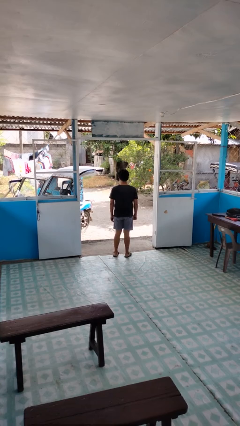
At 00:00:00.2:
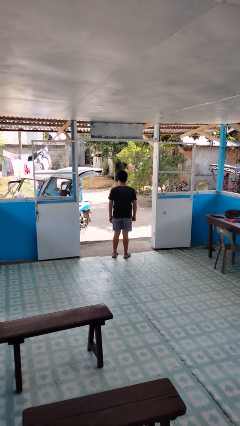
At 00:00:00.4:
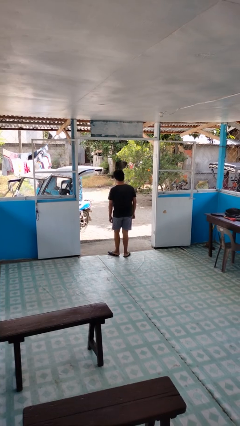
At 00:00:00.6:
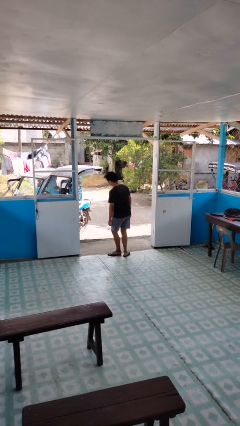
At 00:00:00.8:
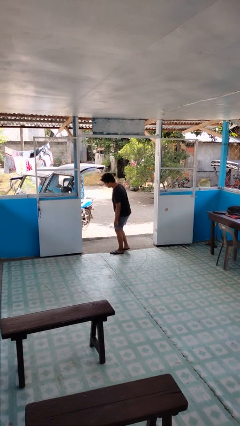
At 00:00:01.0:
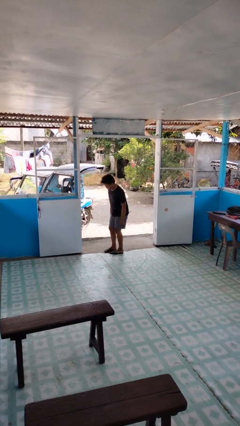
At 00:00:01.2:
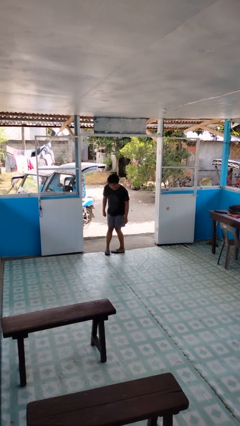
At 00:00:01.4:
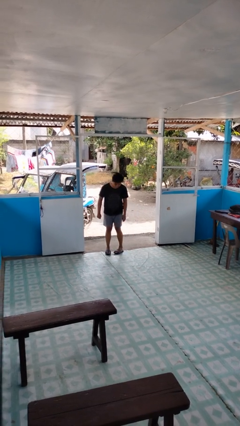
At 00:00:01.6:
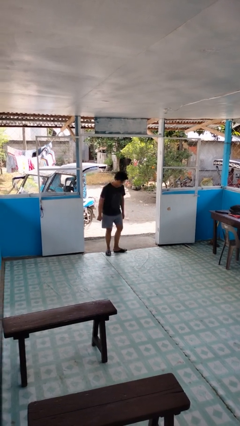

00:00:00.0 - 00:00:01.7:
person twirls

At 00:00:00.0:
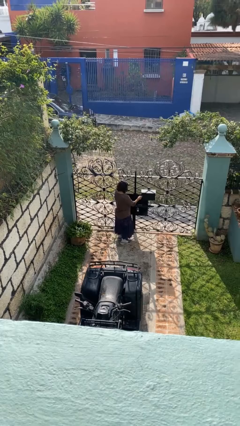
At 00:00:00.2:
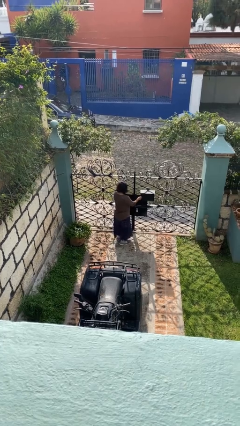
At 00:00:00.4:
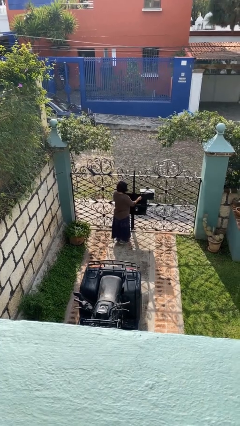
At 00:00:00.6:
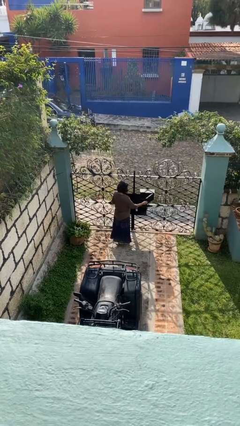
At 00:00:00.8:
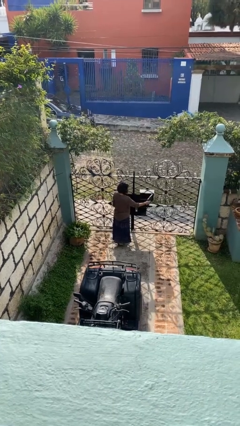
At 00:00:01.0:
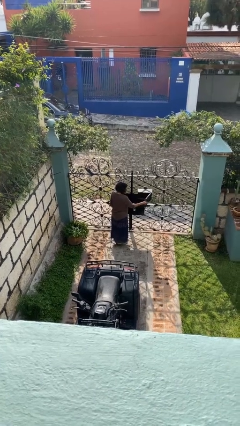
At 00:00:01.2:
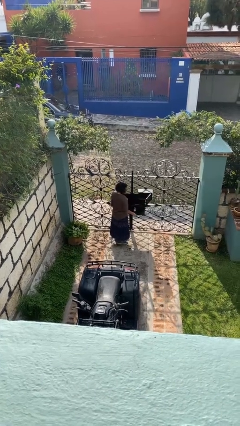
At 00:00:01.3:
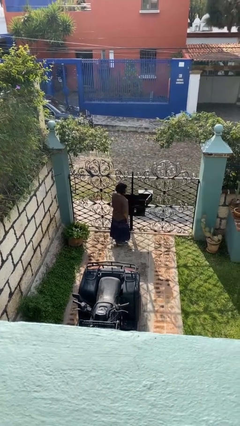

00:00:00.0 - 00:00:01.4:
person opens mailbox

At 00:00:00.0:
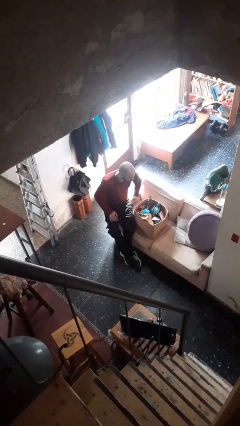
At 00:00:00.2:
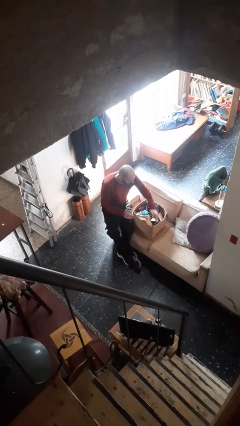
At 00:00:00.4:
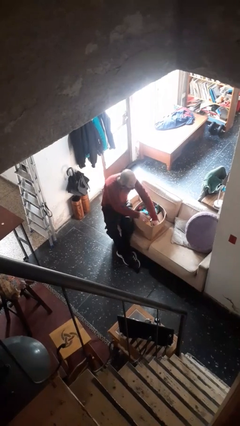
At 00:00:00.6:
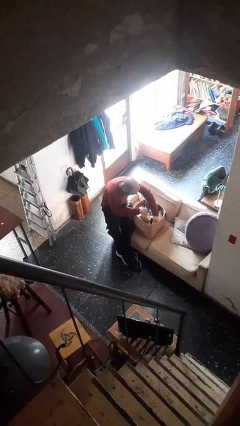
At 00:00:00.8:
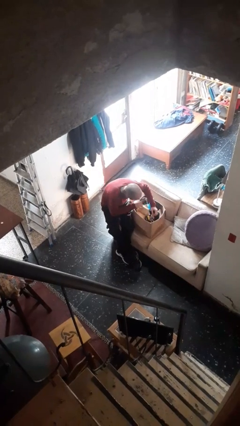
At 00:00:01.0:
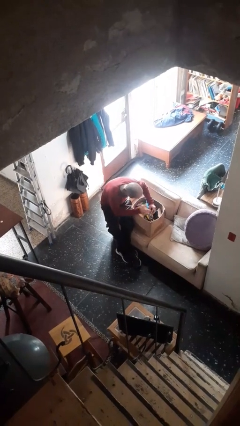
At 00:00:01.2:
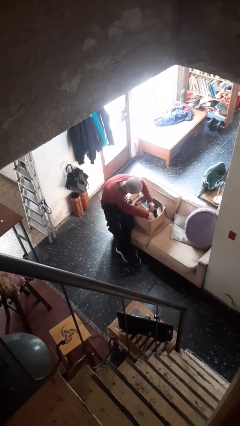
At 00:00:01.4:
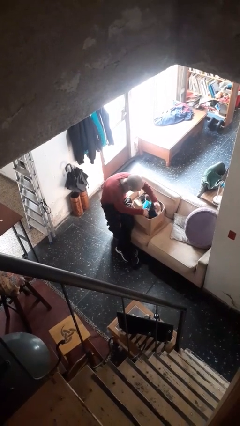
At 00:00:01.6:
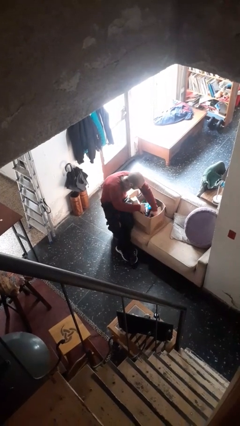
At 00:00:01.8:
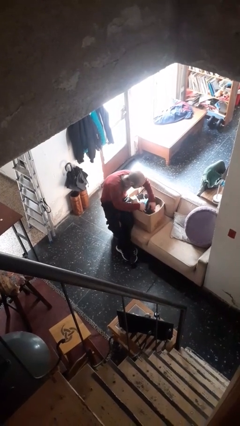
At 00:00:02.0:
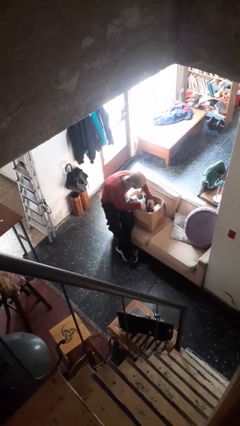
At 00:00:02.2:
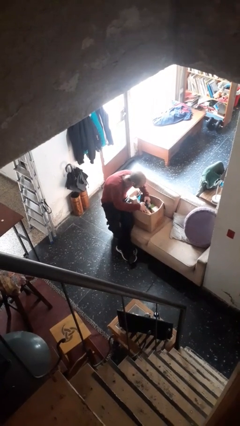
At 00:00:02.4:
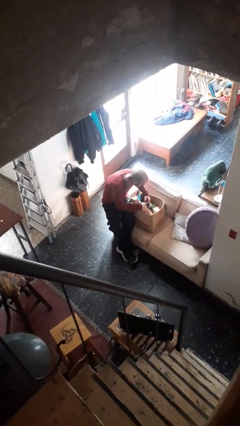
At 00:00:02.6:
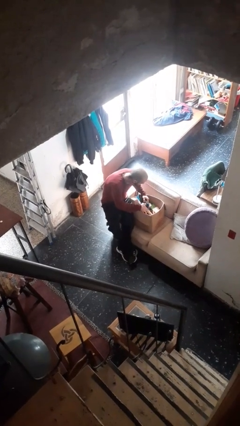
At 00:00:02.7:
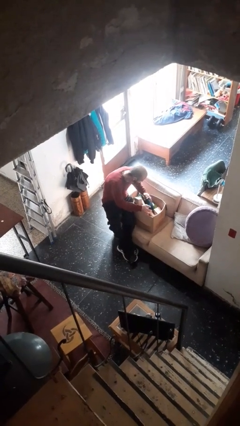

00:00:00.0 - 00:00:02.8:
person searches in box

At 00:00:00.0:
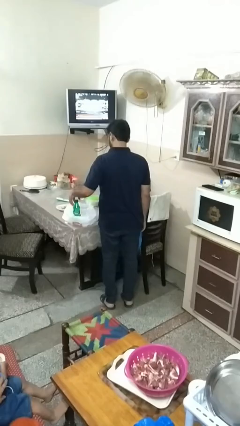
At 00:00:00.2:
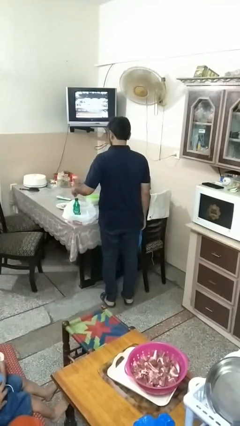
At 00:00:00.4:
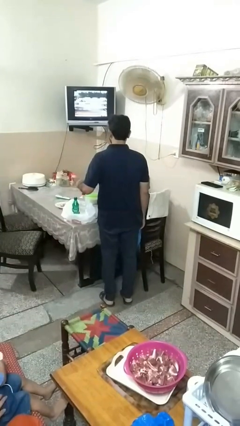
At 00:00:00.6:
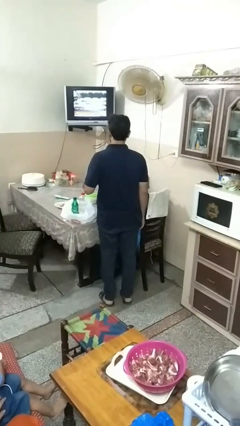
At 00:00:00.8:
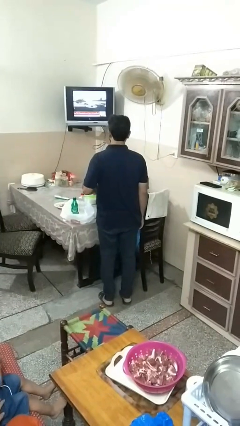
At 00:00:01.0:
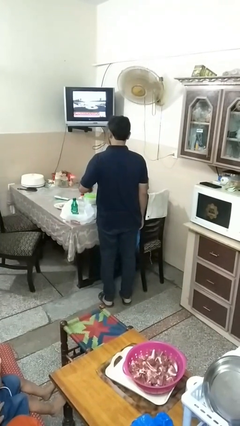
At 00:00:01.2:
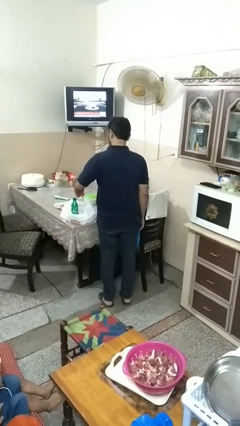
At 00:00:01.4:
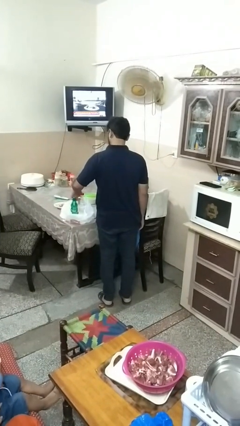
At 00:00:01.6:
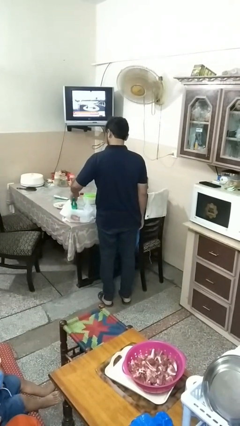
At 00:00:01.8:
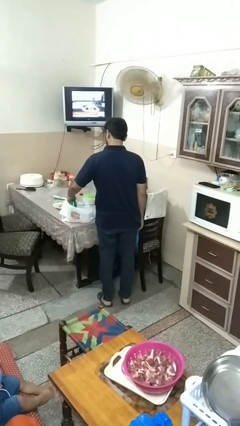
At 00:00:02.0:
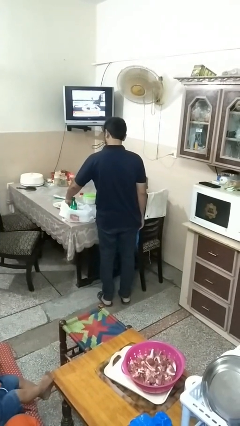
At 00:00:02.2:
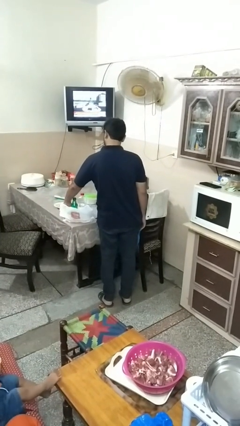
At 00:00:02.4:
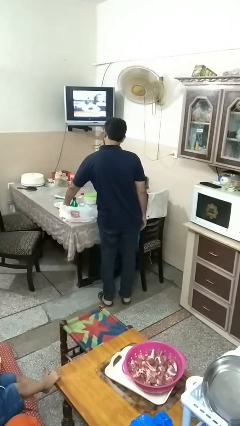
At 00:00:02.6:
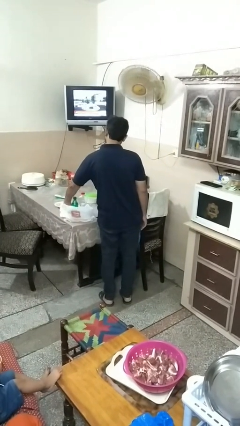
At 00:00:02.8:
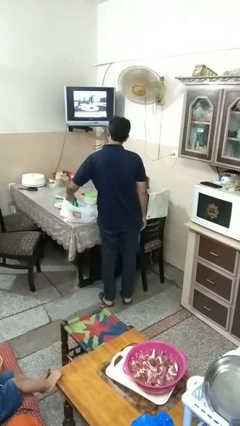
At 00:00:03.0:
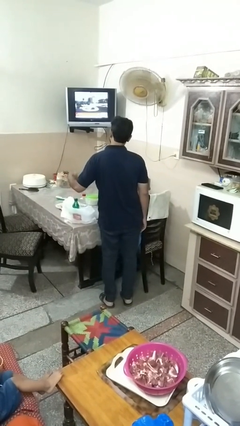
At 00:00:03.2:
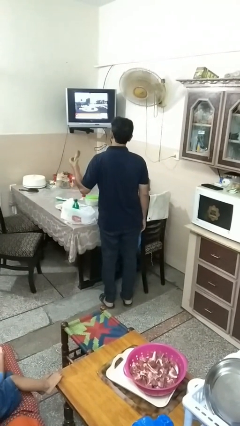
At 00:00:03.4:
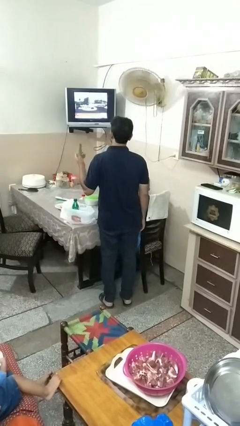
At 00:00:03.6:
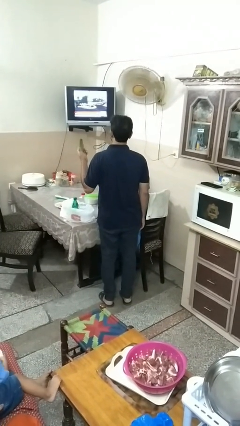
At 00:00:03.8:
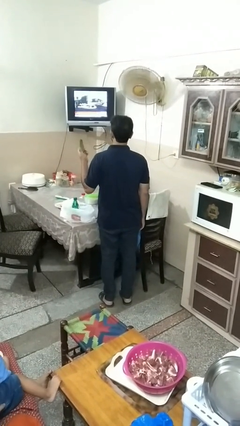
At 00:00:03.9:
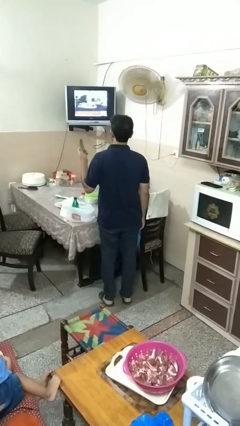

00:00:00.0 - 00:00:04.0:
person takes object from bag

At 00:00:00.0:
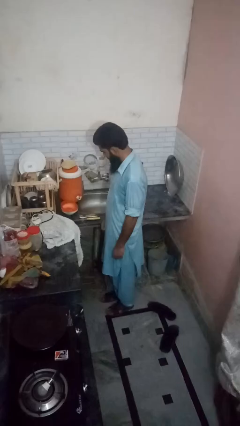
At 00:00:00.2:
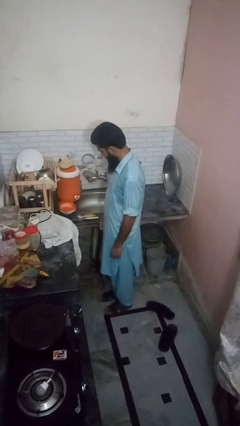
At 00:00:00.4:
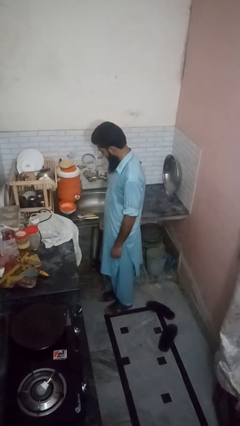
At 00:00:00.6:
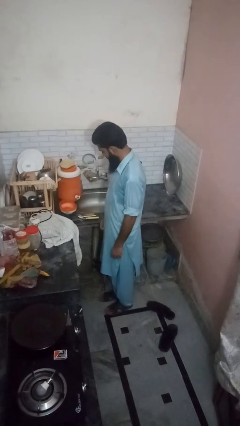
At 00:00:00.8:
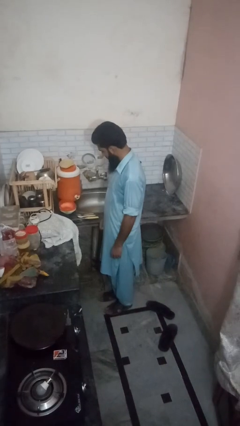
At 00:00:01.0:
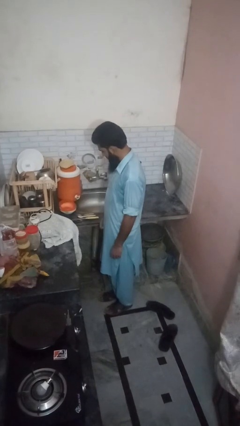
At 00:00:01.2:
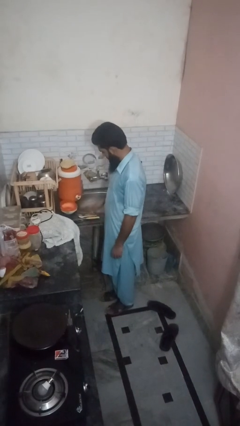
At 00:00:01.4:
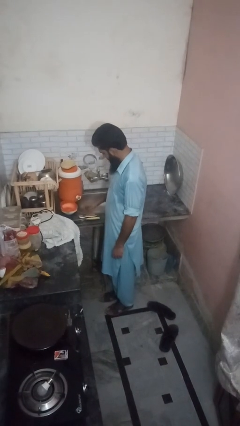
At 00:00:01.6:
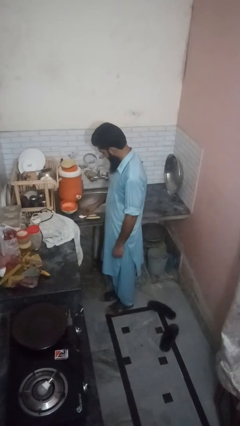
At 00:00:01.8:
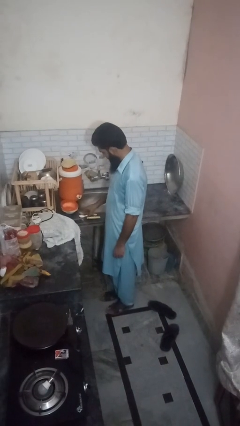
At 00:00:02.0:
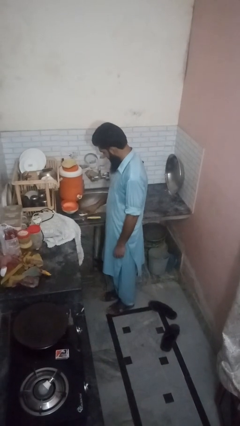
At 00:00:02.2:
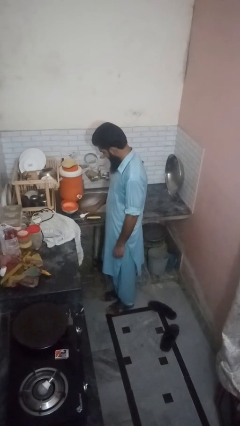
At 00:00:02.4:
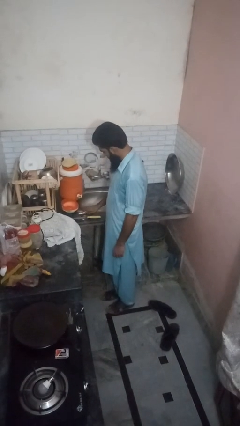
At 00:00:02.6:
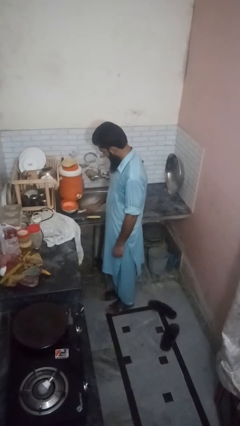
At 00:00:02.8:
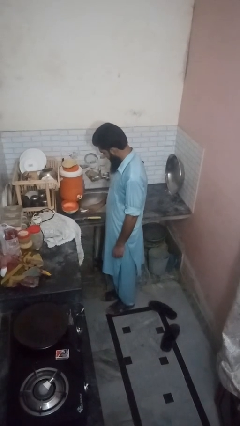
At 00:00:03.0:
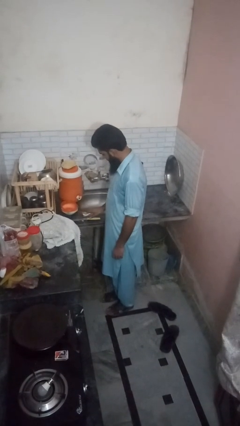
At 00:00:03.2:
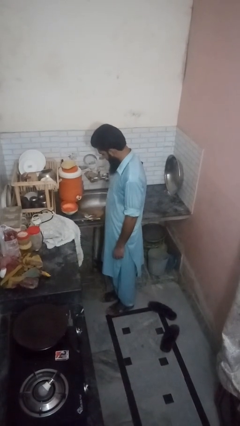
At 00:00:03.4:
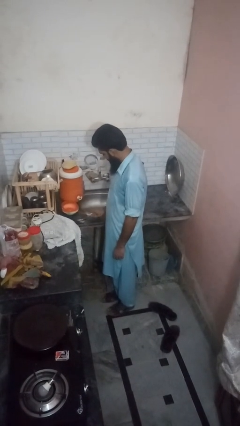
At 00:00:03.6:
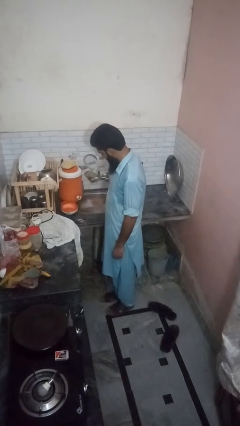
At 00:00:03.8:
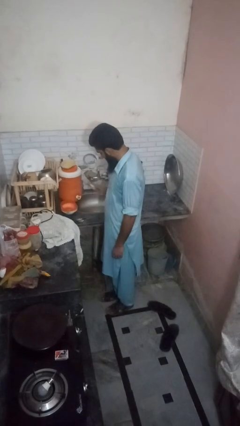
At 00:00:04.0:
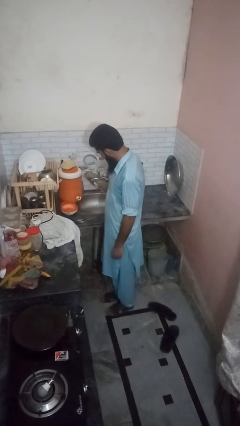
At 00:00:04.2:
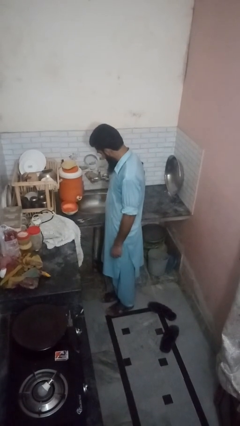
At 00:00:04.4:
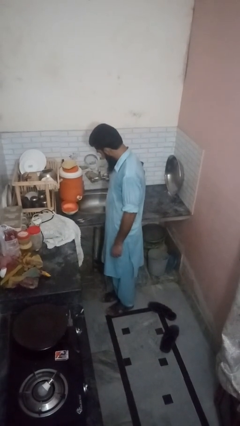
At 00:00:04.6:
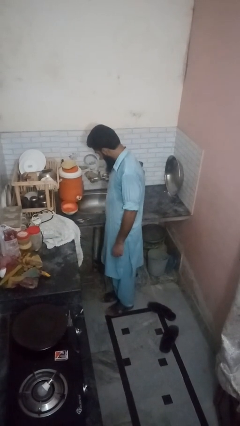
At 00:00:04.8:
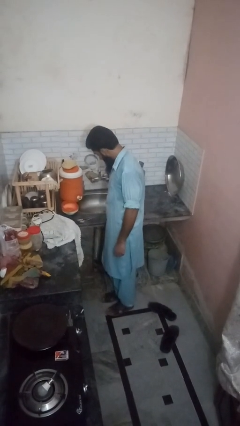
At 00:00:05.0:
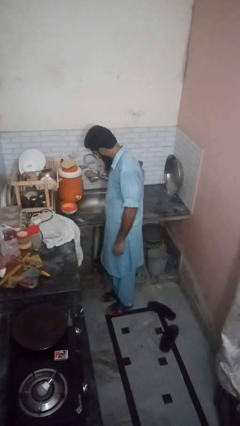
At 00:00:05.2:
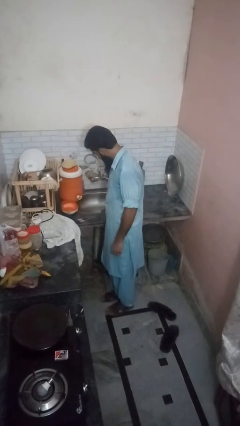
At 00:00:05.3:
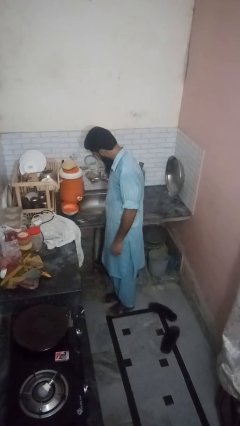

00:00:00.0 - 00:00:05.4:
person loads dishwasher

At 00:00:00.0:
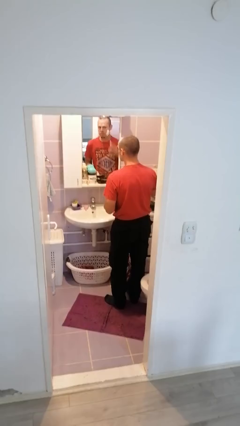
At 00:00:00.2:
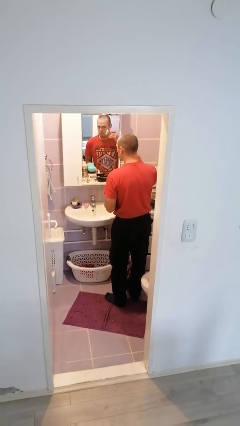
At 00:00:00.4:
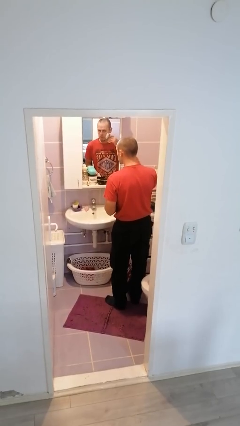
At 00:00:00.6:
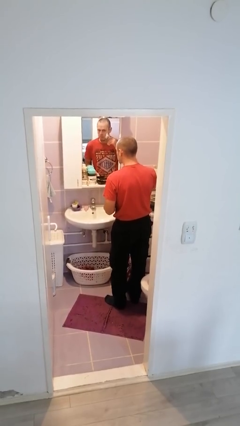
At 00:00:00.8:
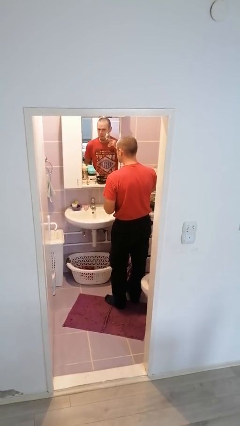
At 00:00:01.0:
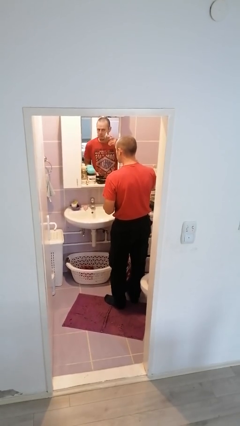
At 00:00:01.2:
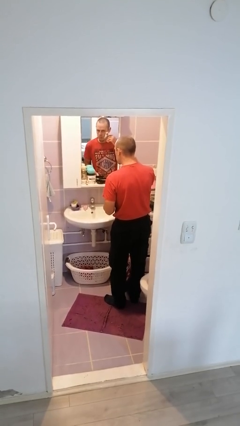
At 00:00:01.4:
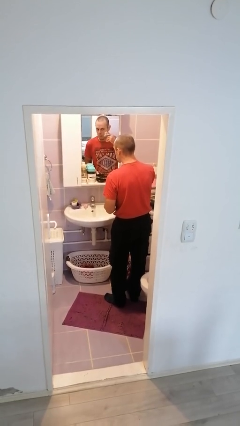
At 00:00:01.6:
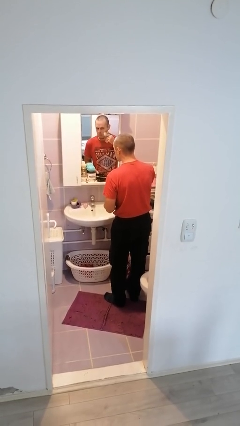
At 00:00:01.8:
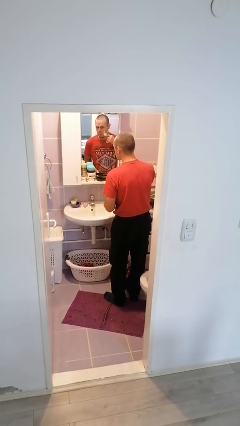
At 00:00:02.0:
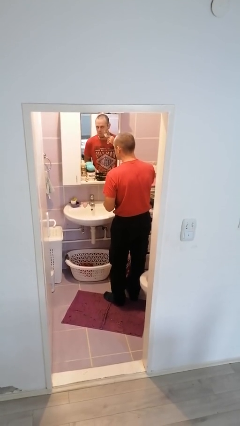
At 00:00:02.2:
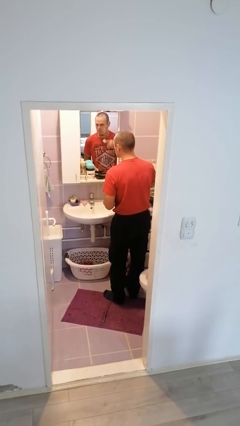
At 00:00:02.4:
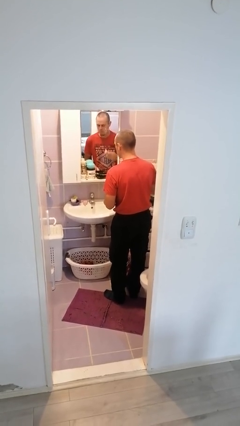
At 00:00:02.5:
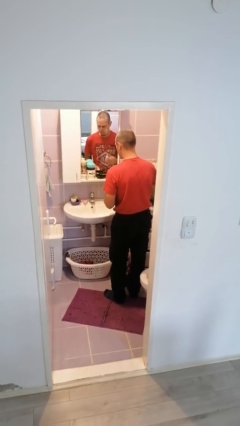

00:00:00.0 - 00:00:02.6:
person shaves face
